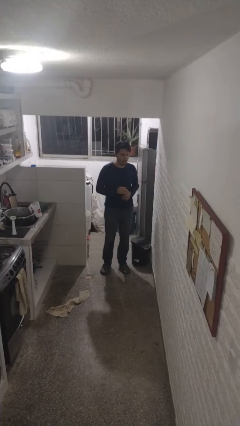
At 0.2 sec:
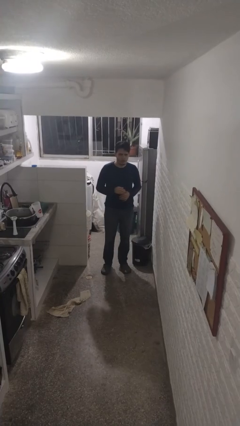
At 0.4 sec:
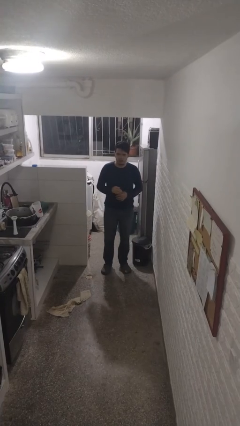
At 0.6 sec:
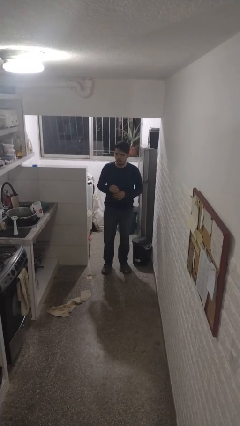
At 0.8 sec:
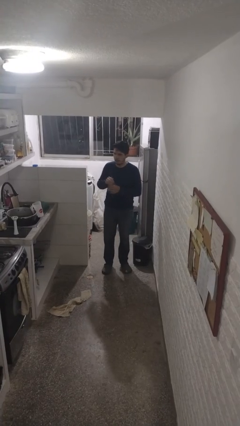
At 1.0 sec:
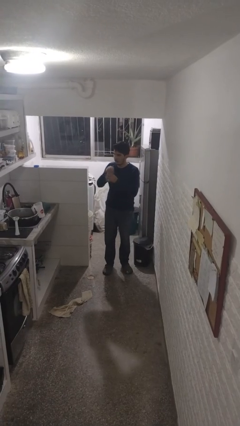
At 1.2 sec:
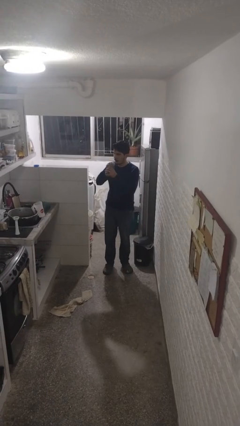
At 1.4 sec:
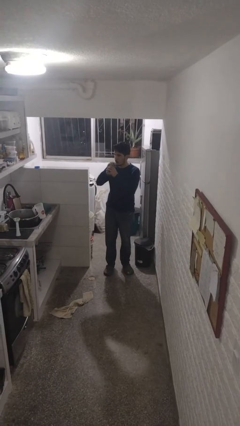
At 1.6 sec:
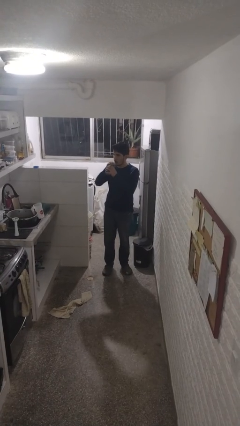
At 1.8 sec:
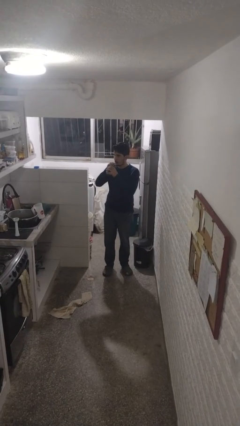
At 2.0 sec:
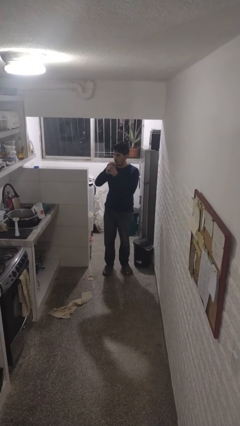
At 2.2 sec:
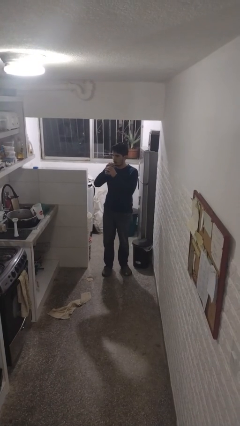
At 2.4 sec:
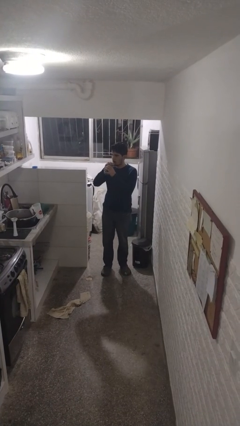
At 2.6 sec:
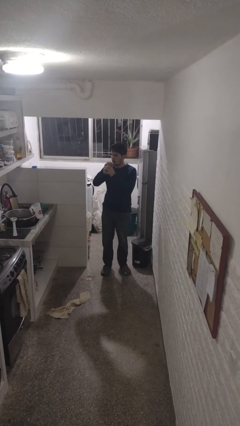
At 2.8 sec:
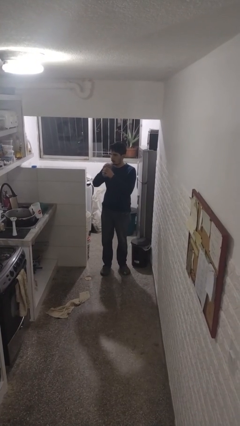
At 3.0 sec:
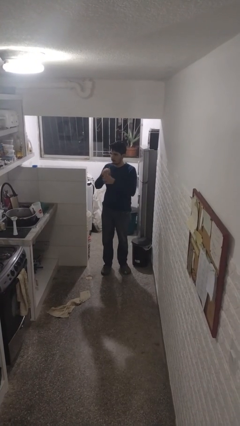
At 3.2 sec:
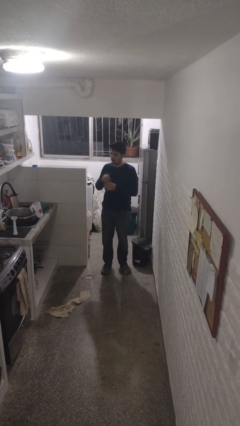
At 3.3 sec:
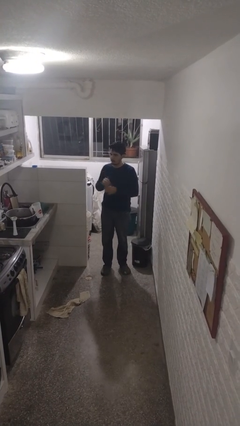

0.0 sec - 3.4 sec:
person drinks from straw

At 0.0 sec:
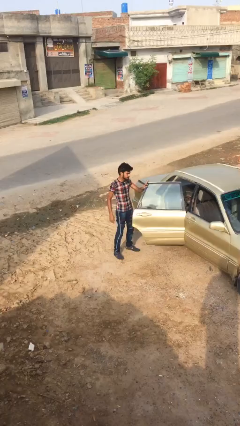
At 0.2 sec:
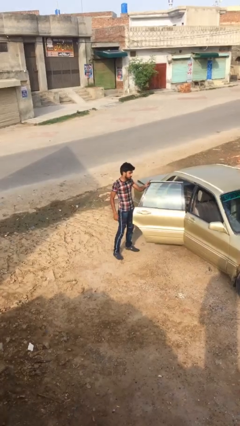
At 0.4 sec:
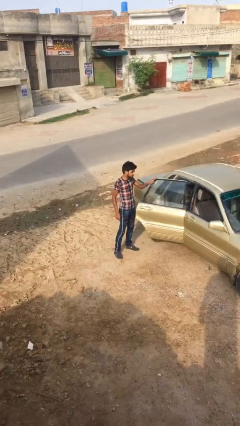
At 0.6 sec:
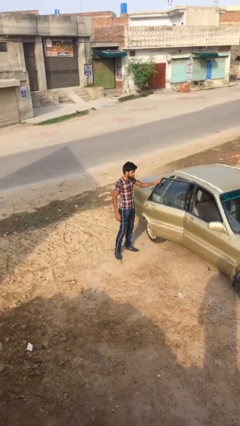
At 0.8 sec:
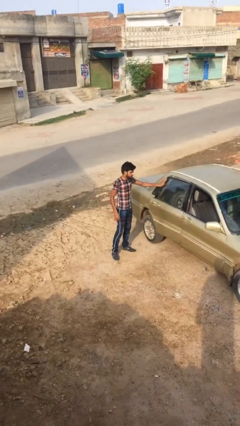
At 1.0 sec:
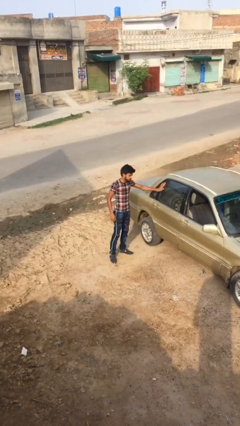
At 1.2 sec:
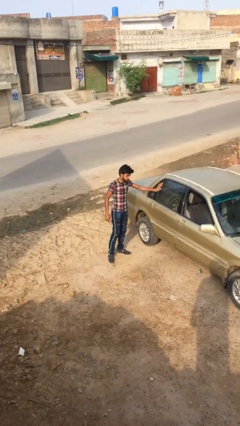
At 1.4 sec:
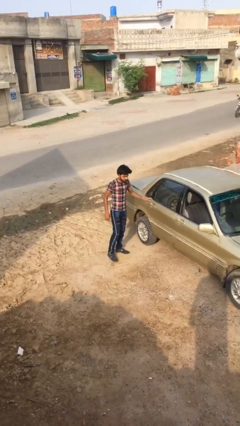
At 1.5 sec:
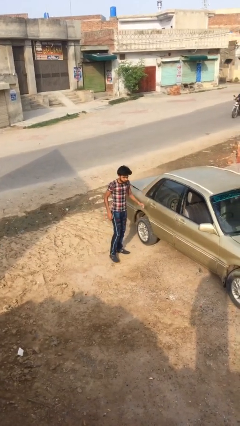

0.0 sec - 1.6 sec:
person closes car door

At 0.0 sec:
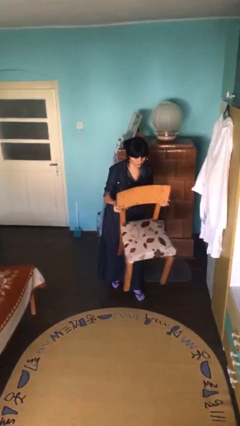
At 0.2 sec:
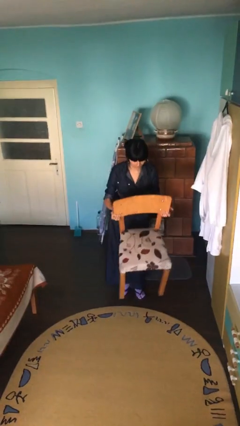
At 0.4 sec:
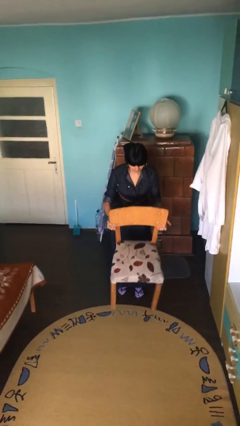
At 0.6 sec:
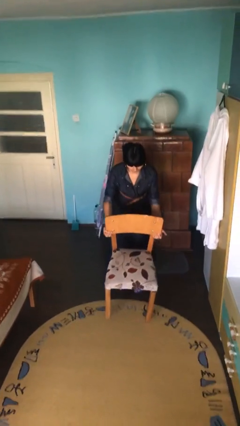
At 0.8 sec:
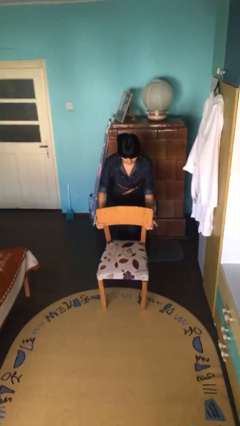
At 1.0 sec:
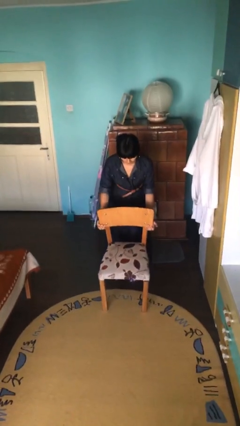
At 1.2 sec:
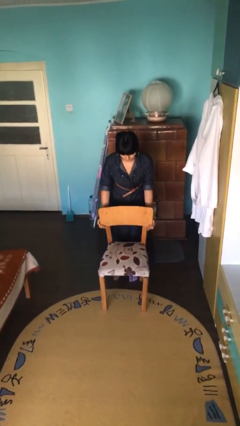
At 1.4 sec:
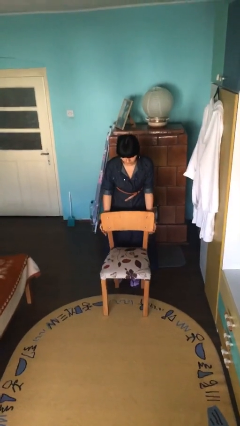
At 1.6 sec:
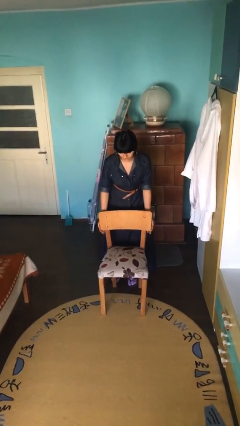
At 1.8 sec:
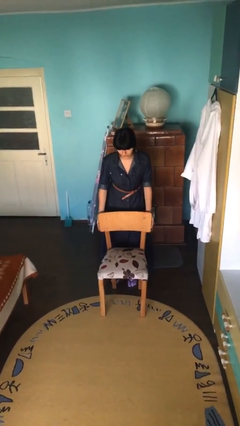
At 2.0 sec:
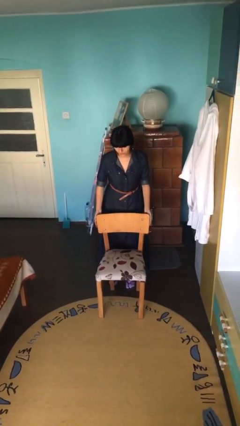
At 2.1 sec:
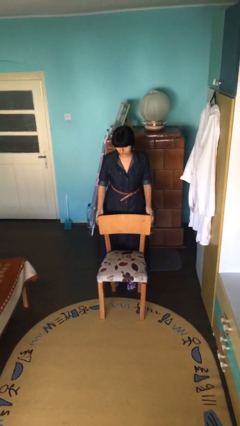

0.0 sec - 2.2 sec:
person puts down object on floor

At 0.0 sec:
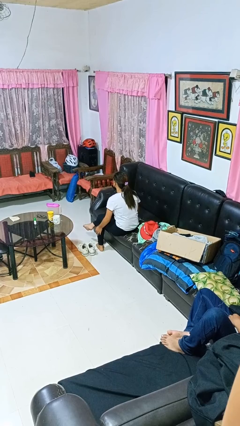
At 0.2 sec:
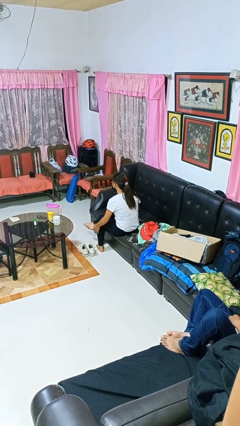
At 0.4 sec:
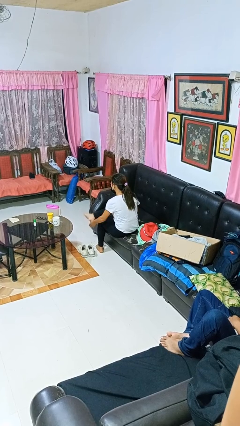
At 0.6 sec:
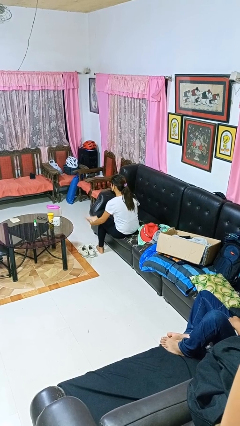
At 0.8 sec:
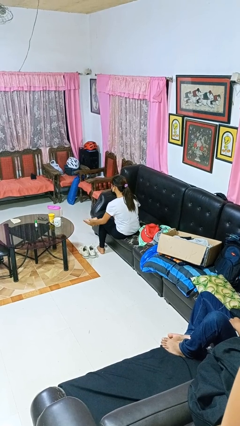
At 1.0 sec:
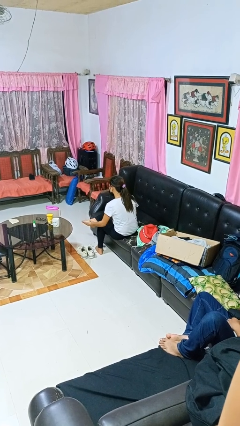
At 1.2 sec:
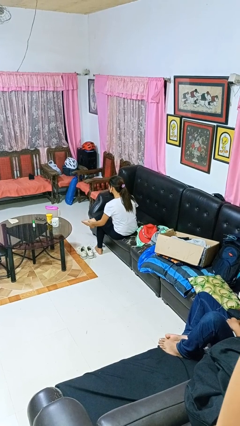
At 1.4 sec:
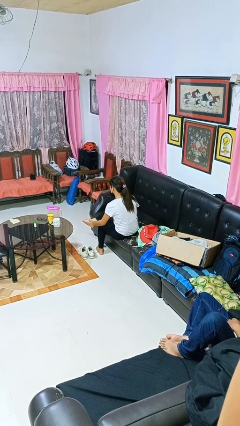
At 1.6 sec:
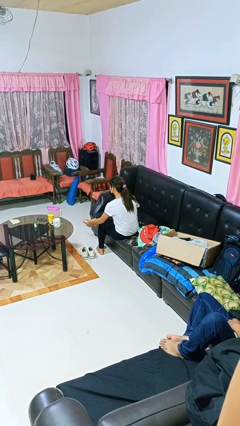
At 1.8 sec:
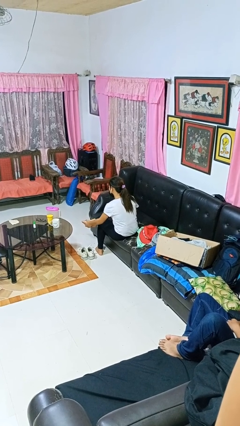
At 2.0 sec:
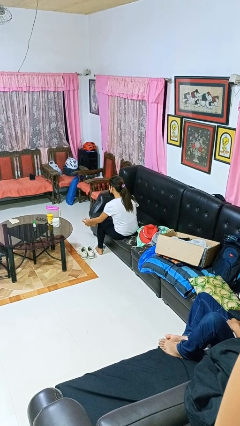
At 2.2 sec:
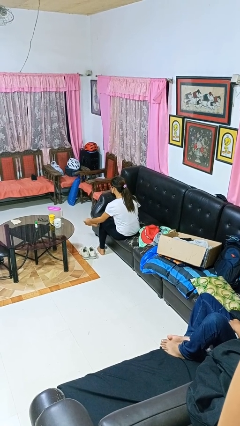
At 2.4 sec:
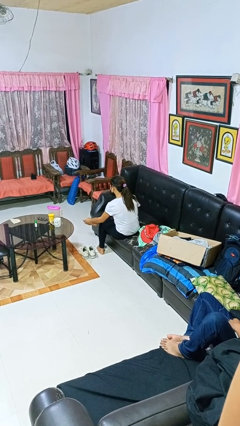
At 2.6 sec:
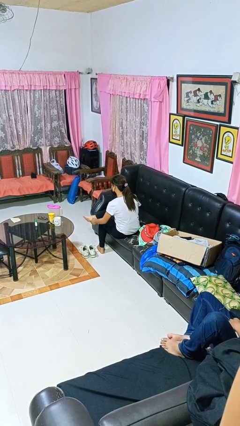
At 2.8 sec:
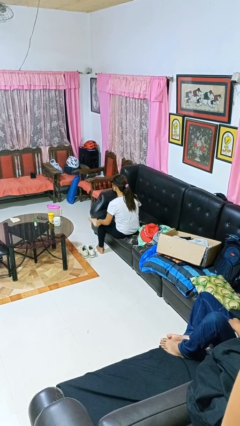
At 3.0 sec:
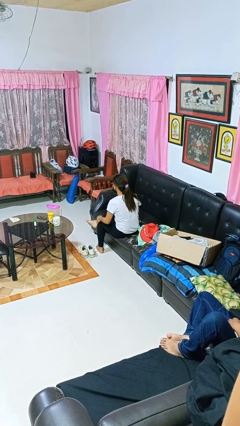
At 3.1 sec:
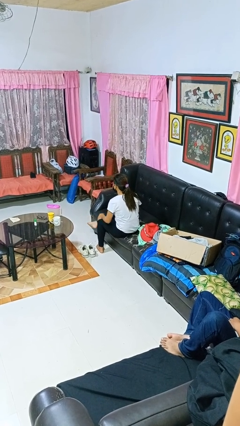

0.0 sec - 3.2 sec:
person rubs foot

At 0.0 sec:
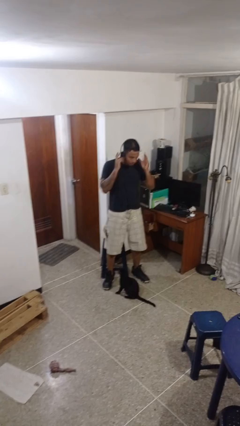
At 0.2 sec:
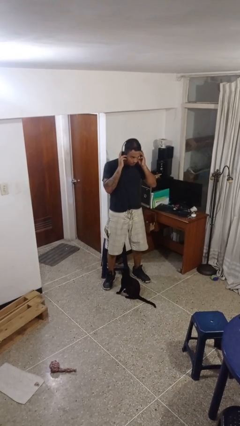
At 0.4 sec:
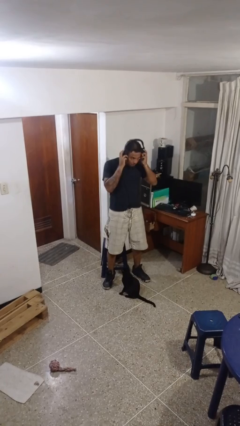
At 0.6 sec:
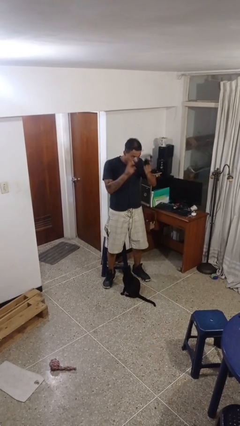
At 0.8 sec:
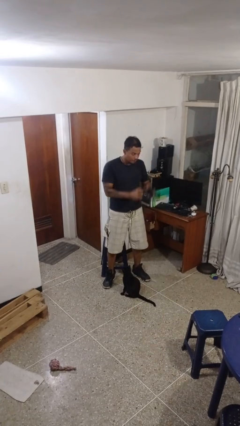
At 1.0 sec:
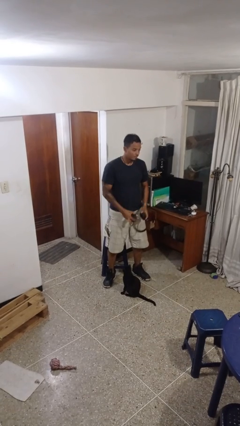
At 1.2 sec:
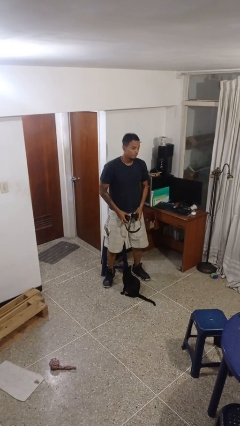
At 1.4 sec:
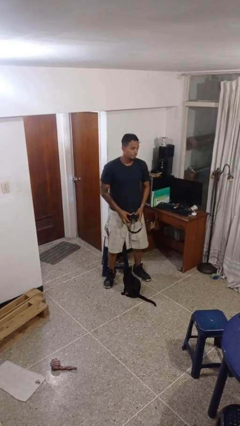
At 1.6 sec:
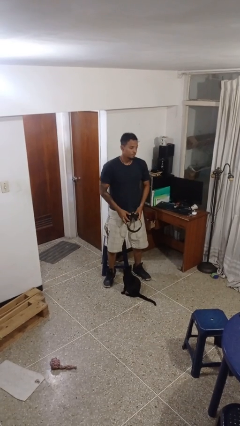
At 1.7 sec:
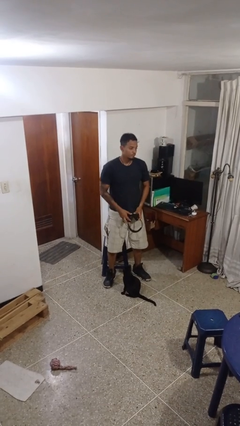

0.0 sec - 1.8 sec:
person takes off headphones

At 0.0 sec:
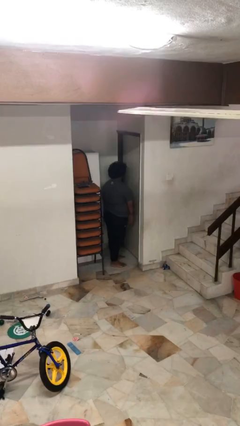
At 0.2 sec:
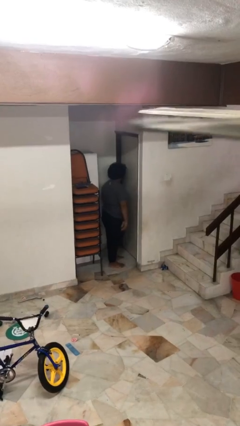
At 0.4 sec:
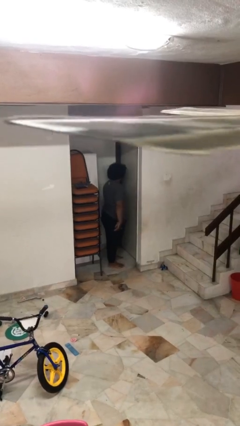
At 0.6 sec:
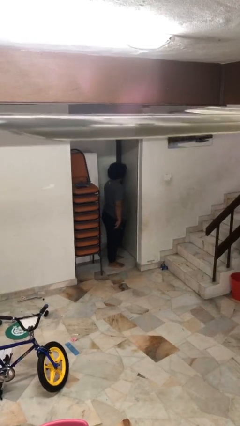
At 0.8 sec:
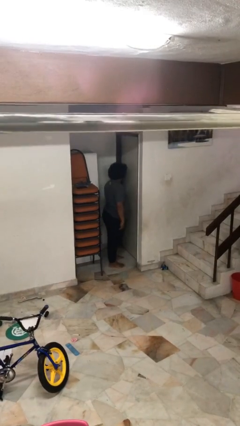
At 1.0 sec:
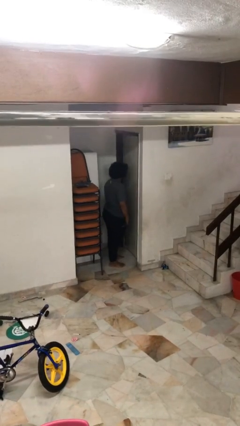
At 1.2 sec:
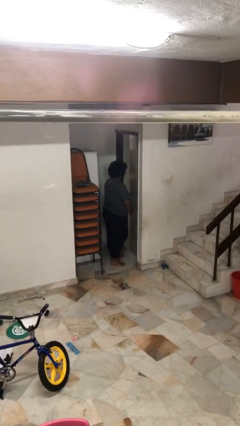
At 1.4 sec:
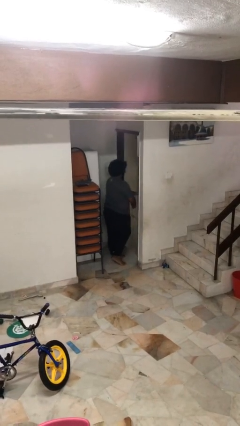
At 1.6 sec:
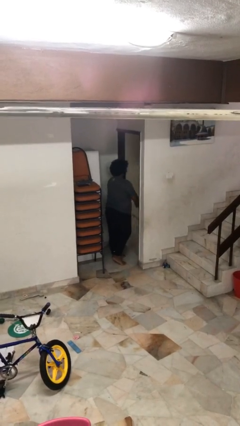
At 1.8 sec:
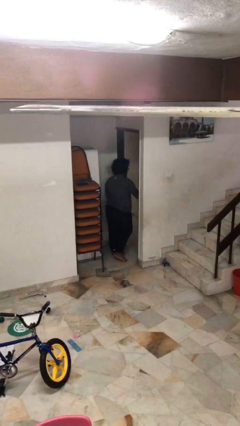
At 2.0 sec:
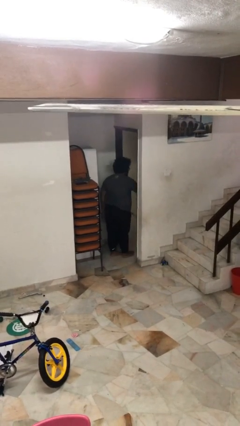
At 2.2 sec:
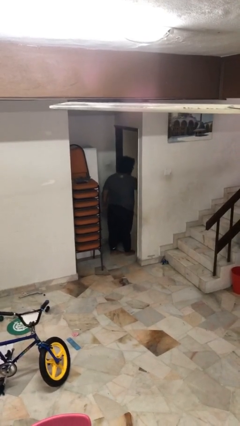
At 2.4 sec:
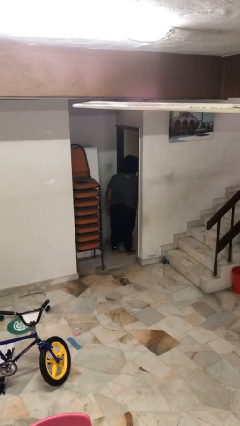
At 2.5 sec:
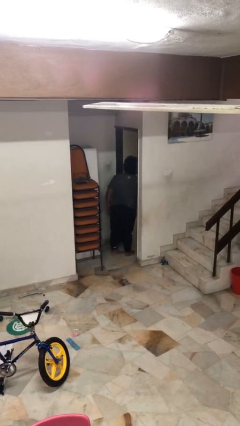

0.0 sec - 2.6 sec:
person opens facility door

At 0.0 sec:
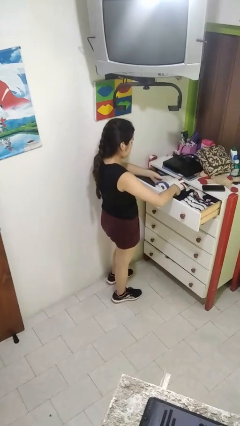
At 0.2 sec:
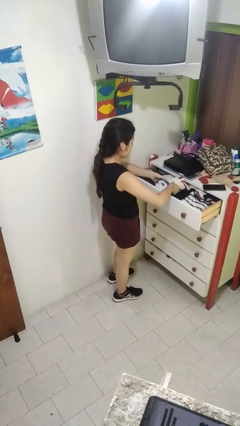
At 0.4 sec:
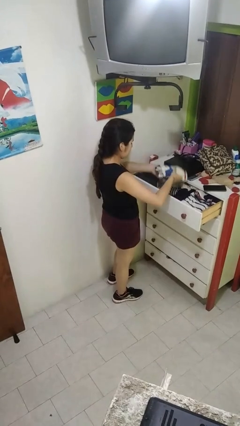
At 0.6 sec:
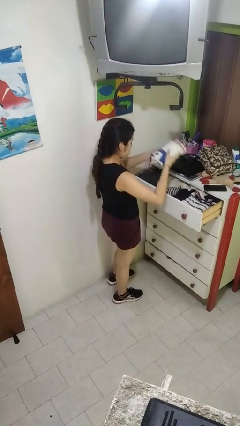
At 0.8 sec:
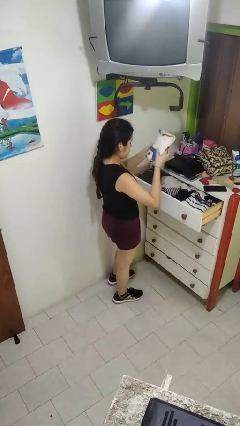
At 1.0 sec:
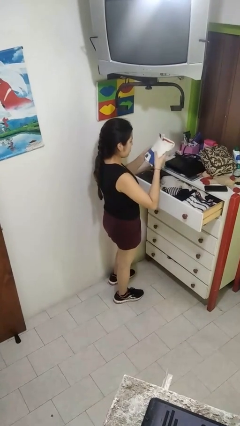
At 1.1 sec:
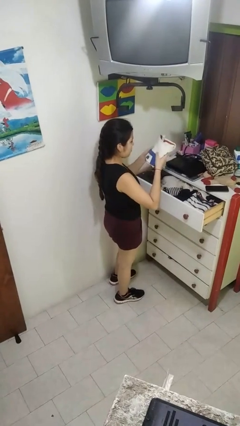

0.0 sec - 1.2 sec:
person takes clothes from dresser

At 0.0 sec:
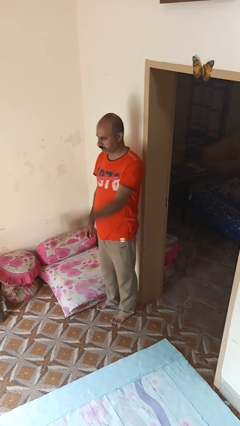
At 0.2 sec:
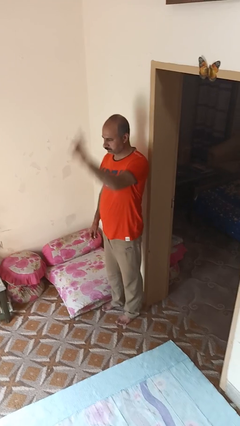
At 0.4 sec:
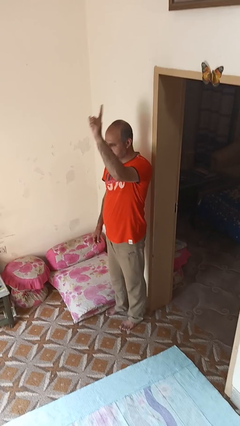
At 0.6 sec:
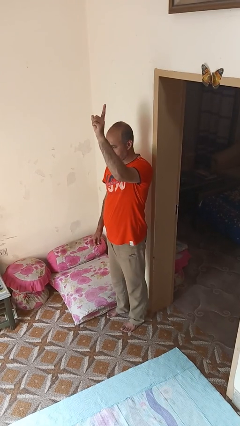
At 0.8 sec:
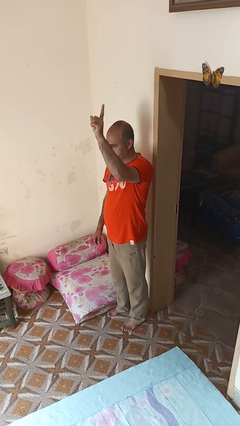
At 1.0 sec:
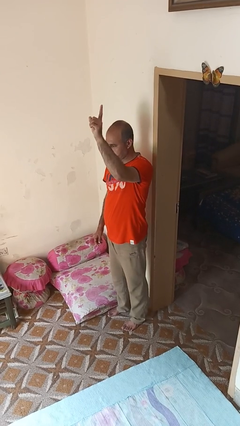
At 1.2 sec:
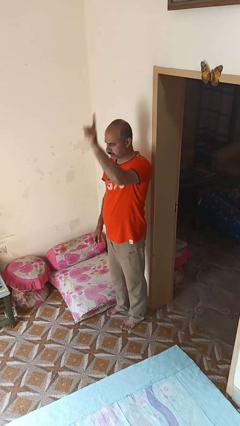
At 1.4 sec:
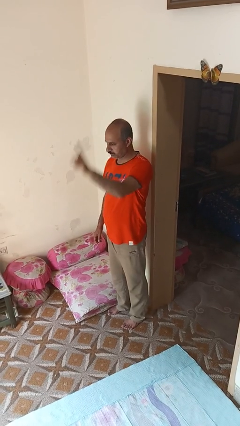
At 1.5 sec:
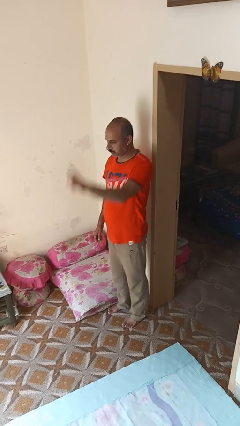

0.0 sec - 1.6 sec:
person gestures swipe up
